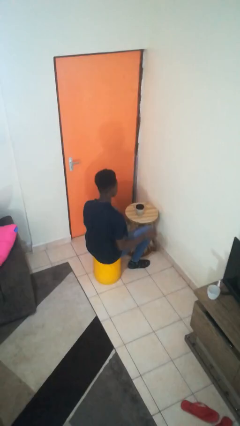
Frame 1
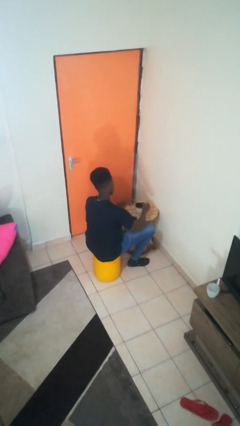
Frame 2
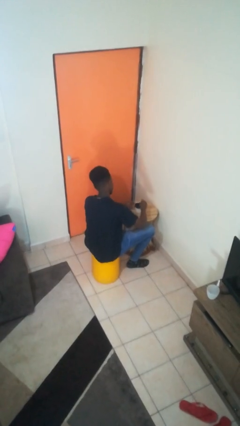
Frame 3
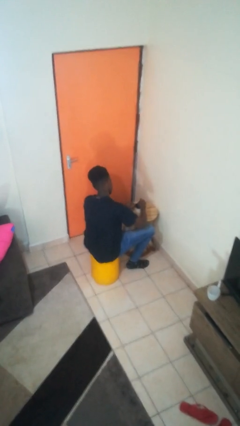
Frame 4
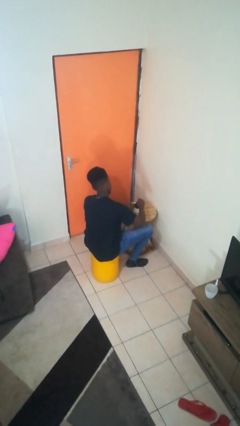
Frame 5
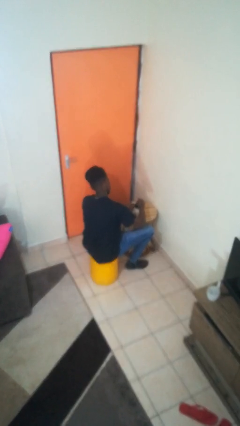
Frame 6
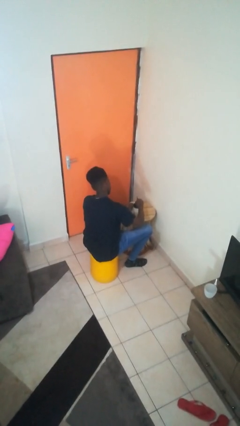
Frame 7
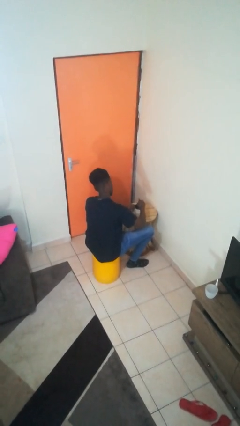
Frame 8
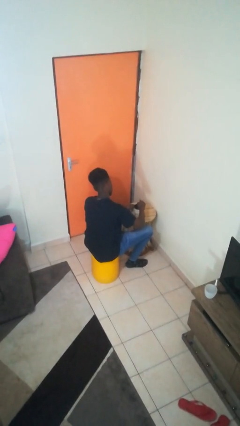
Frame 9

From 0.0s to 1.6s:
person stirs mug

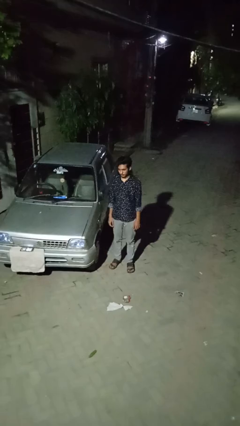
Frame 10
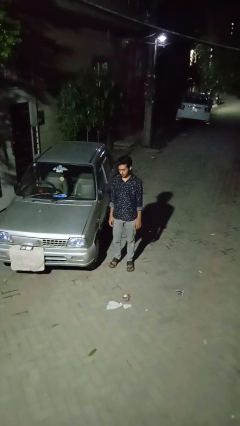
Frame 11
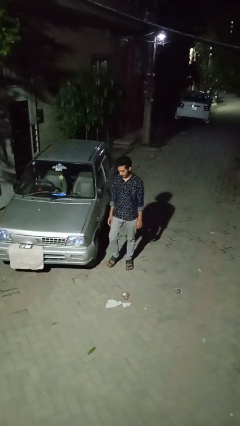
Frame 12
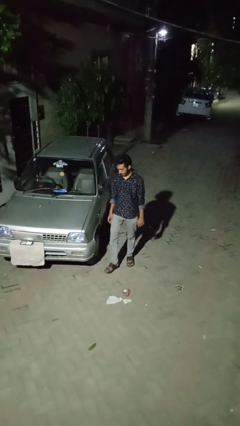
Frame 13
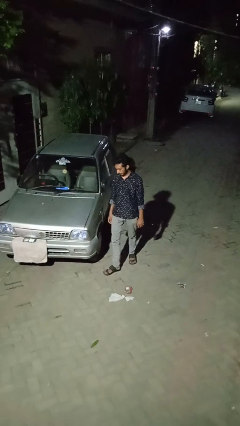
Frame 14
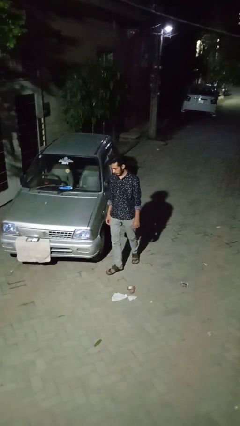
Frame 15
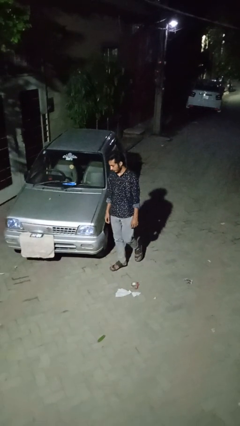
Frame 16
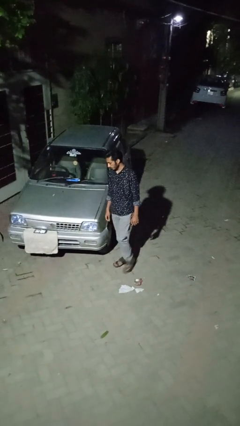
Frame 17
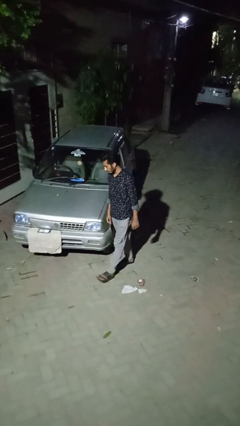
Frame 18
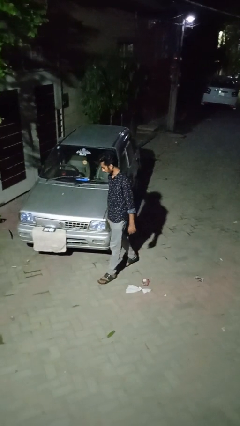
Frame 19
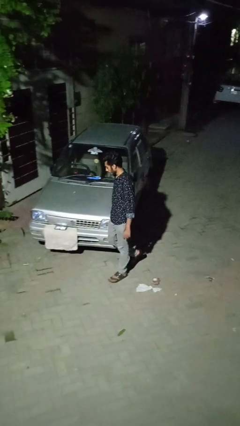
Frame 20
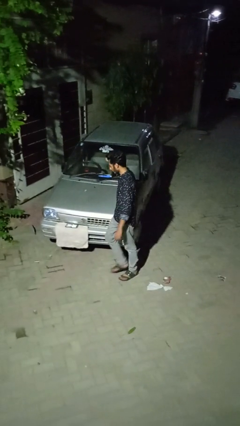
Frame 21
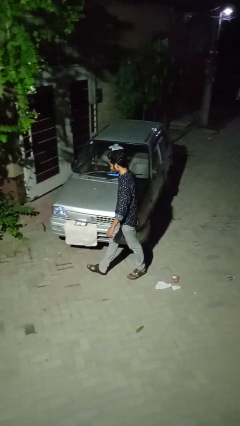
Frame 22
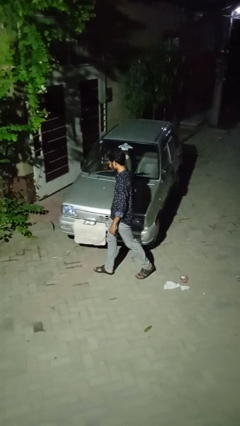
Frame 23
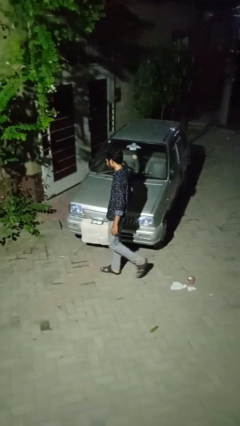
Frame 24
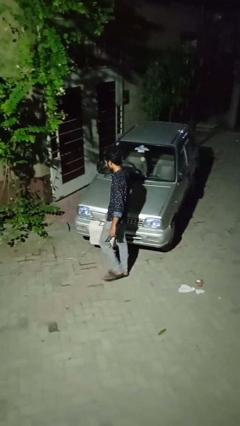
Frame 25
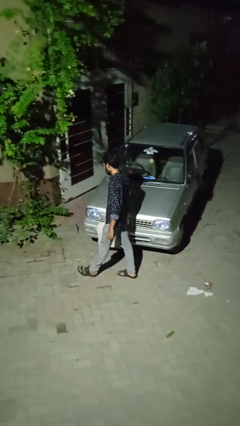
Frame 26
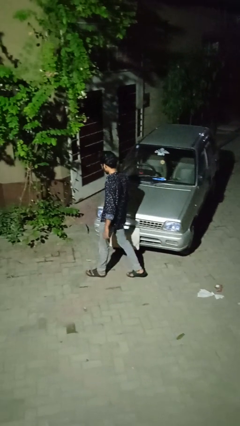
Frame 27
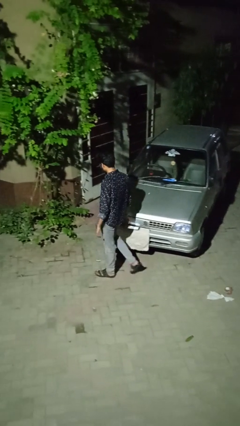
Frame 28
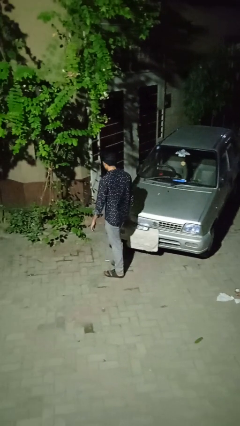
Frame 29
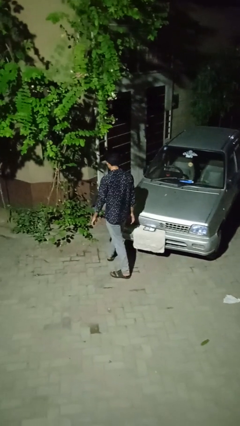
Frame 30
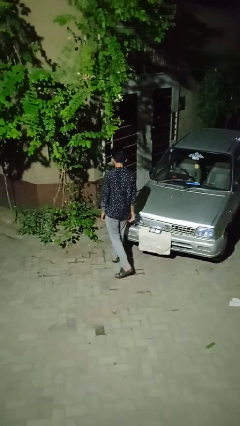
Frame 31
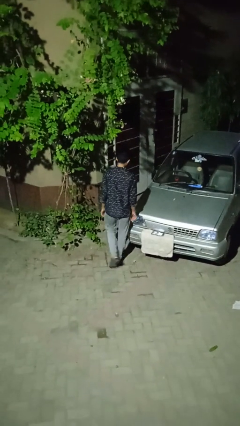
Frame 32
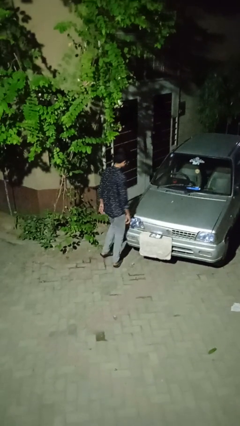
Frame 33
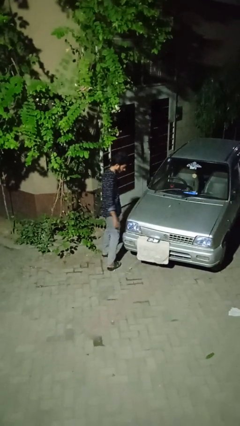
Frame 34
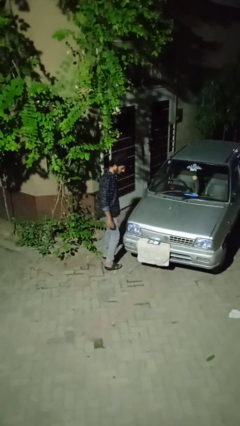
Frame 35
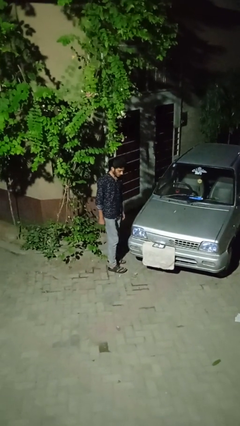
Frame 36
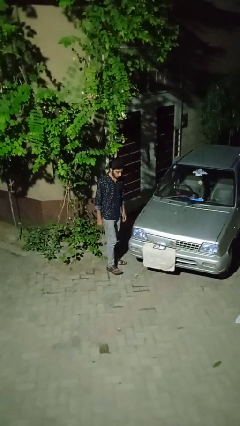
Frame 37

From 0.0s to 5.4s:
person walks around car

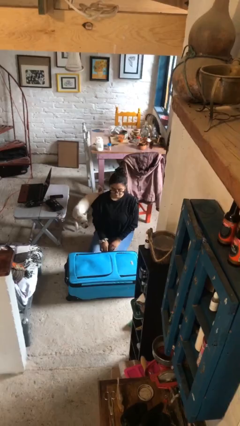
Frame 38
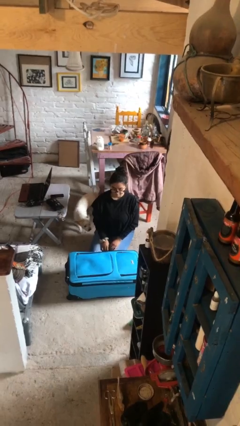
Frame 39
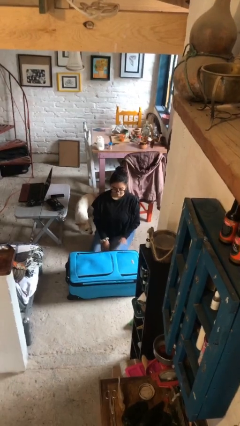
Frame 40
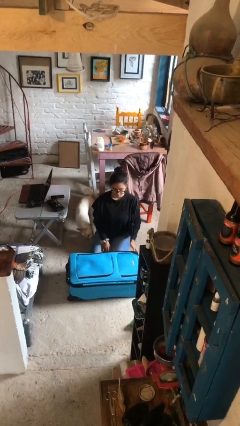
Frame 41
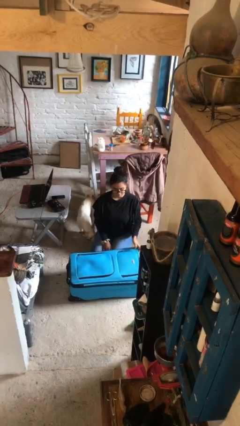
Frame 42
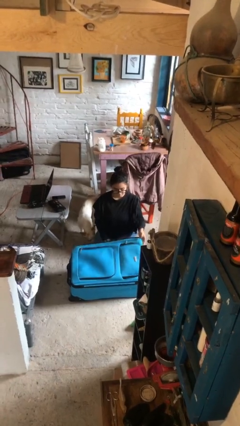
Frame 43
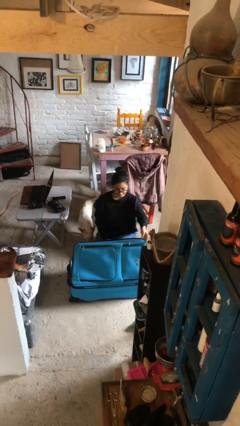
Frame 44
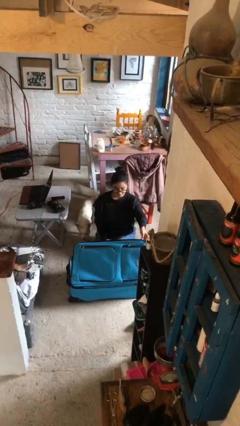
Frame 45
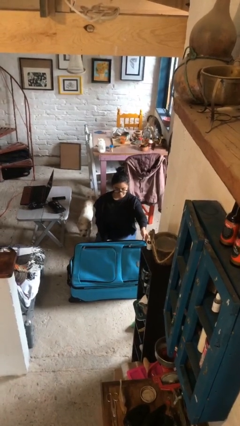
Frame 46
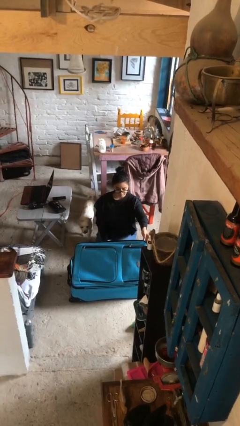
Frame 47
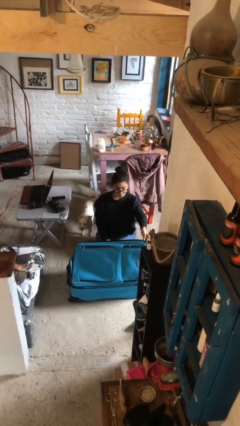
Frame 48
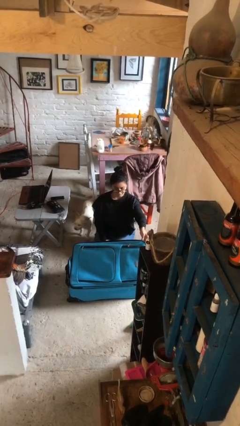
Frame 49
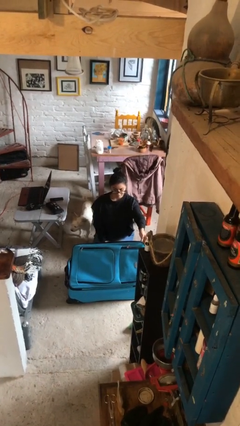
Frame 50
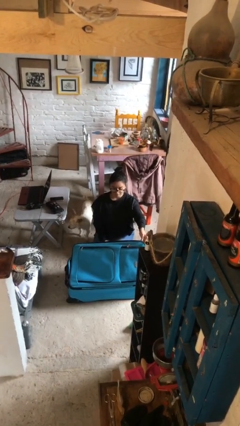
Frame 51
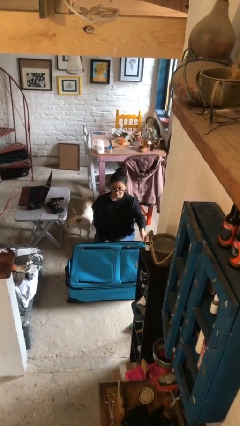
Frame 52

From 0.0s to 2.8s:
person opens suitcase

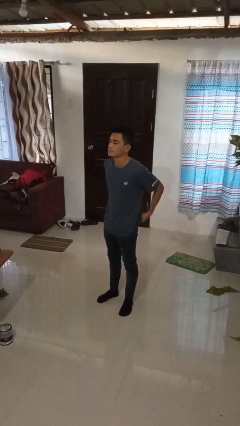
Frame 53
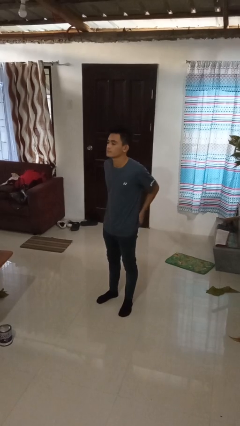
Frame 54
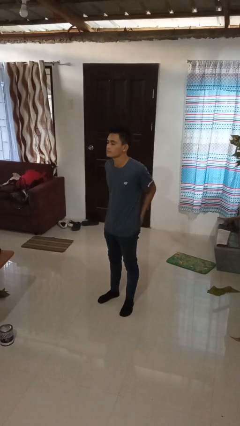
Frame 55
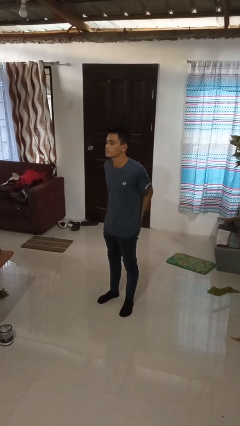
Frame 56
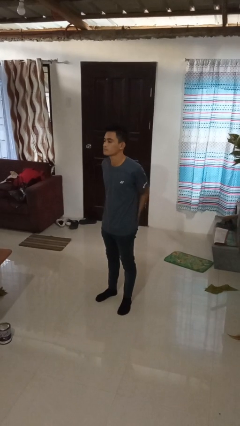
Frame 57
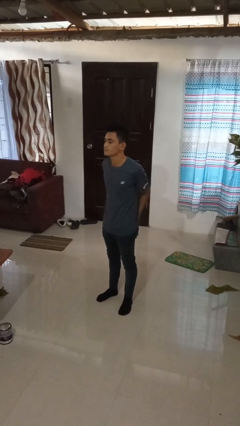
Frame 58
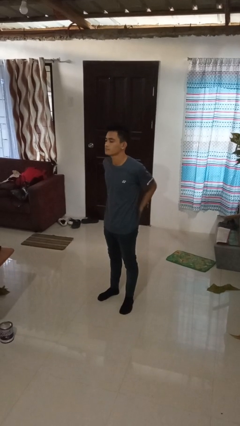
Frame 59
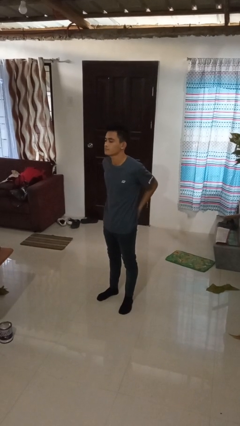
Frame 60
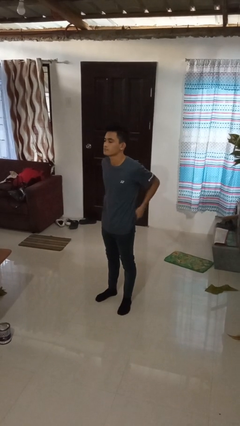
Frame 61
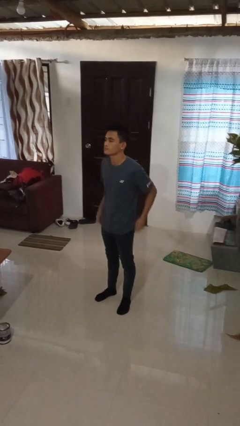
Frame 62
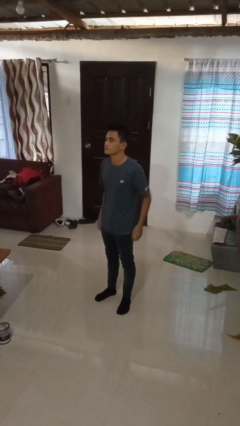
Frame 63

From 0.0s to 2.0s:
person puts hands in back pockets

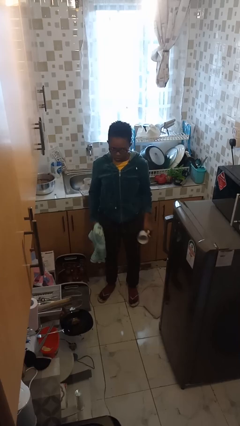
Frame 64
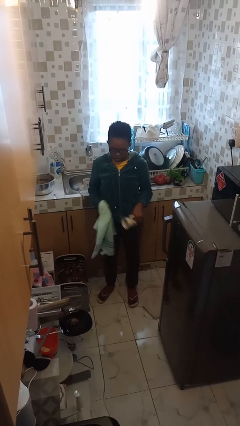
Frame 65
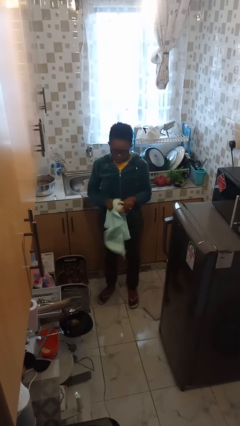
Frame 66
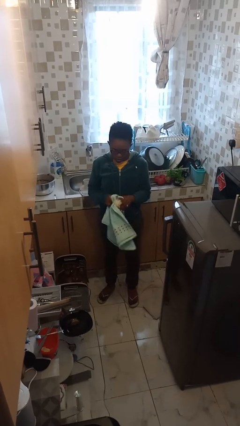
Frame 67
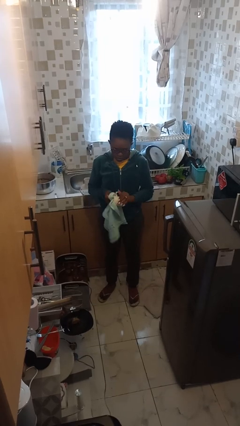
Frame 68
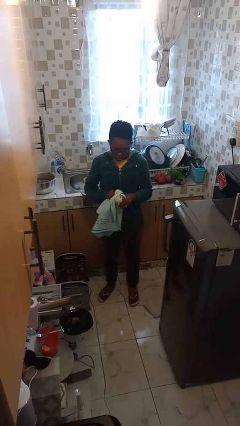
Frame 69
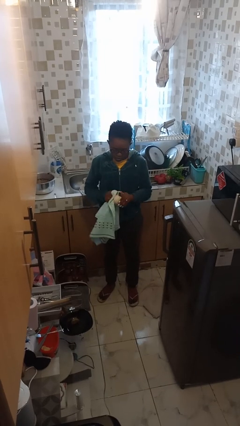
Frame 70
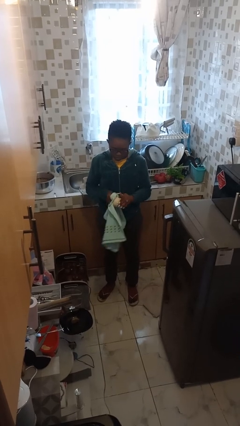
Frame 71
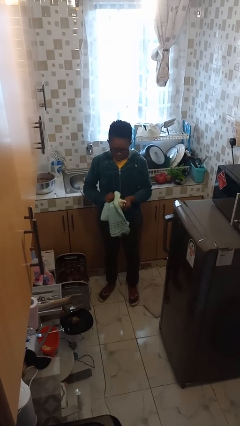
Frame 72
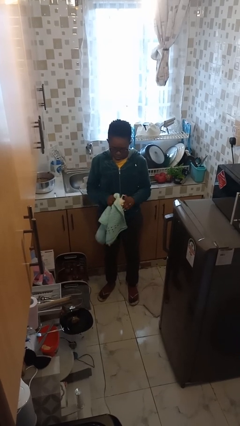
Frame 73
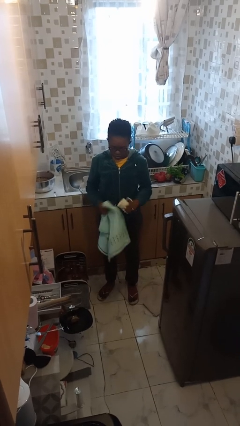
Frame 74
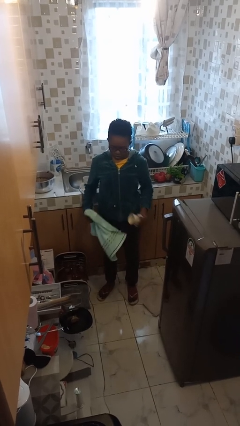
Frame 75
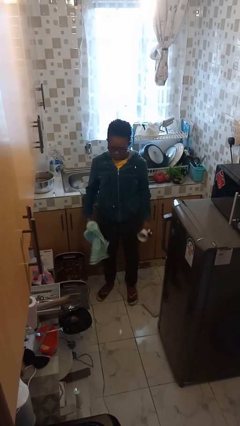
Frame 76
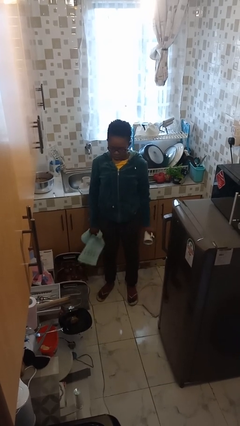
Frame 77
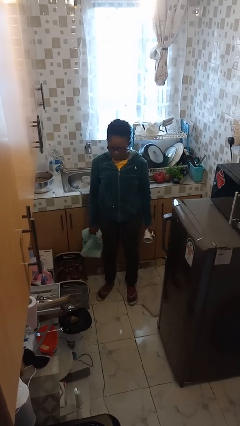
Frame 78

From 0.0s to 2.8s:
person dries dish

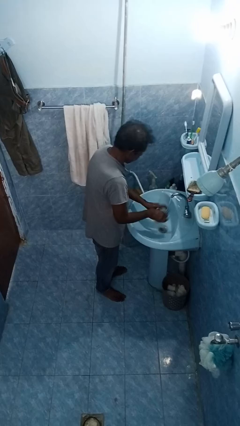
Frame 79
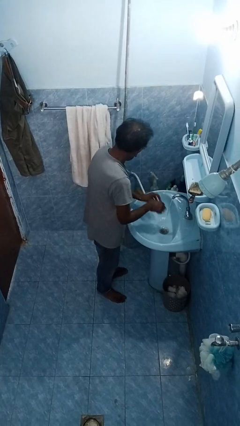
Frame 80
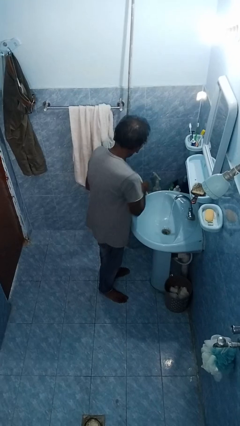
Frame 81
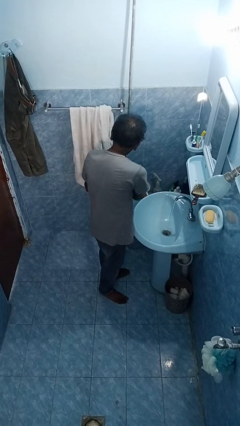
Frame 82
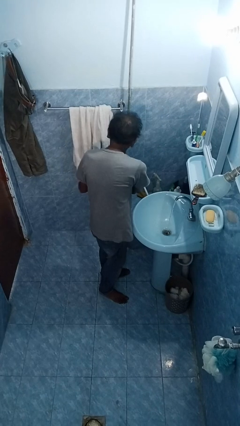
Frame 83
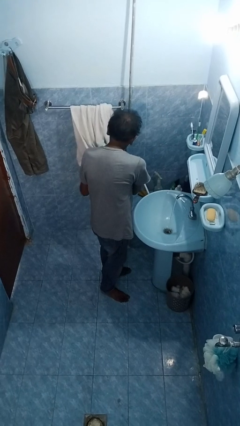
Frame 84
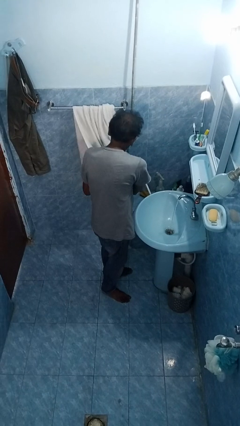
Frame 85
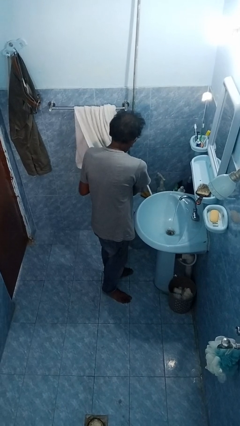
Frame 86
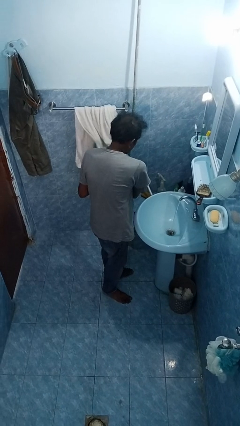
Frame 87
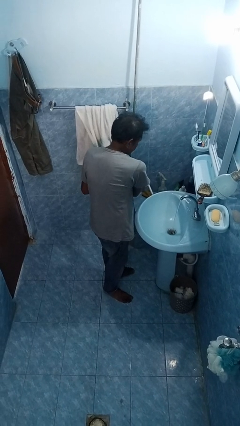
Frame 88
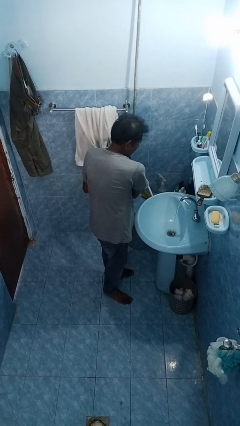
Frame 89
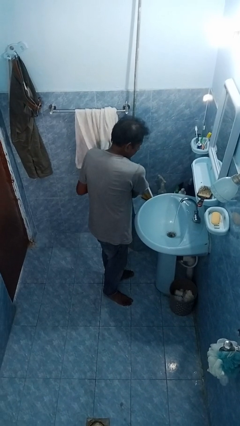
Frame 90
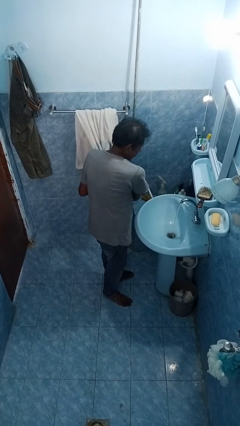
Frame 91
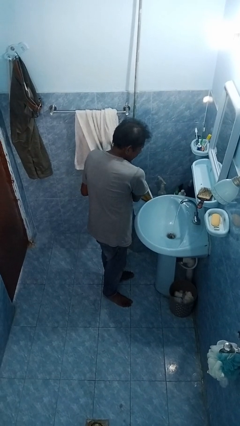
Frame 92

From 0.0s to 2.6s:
person dries hands with towel

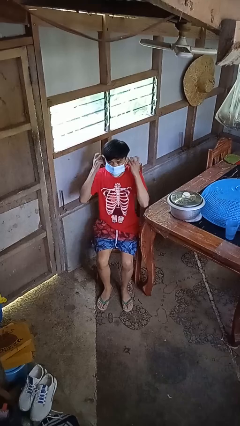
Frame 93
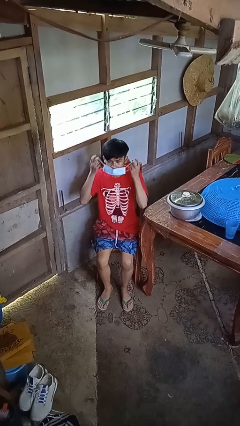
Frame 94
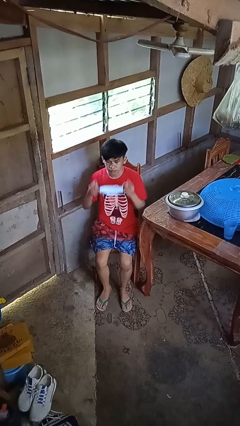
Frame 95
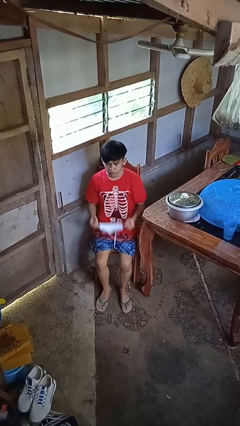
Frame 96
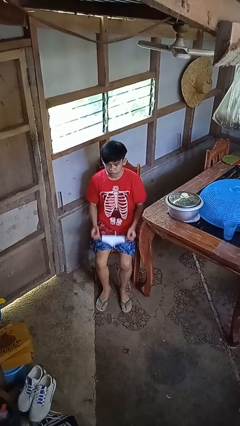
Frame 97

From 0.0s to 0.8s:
person takes off facemask
